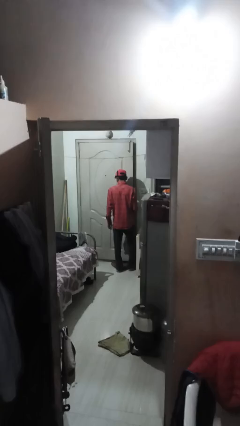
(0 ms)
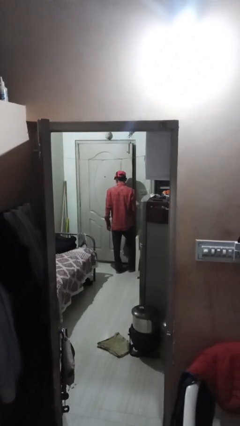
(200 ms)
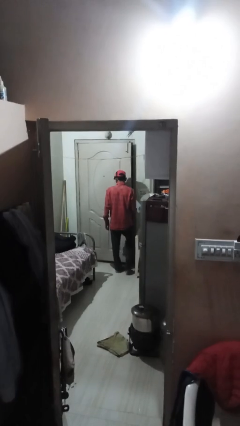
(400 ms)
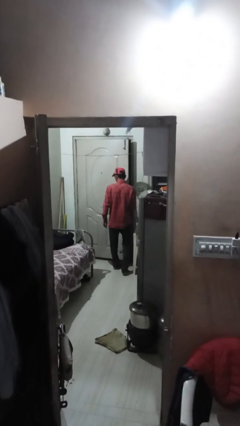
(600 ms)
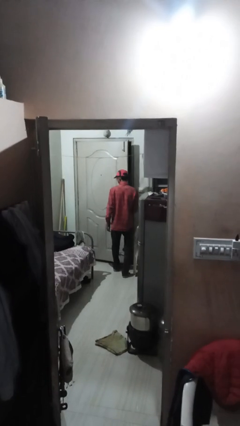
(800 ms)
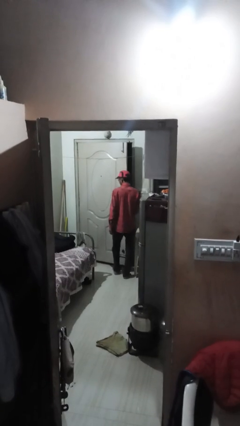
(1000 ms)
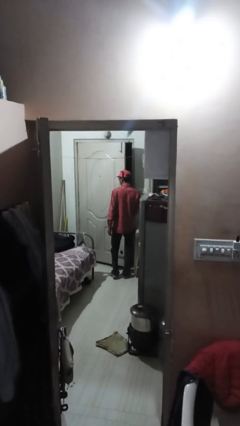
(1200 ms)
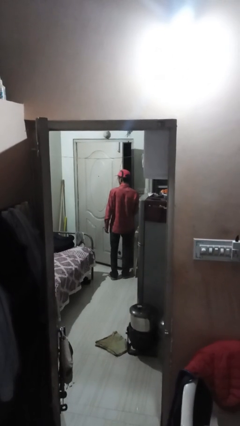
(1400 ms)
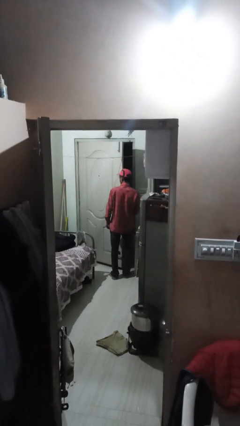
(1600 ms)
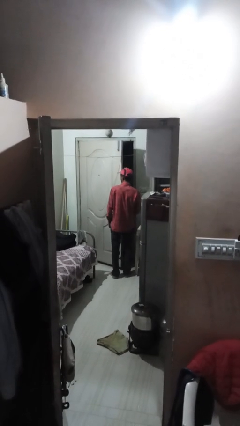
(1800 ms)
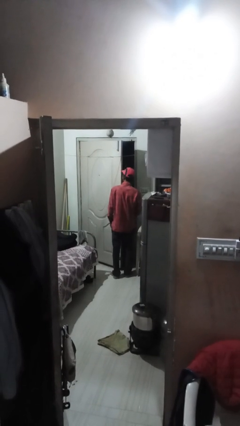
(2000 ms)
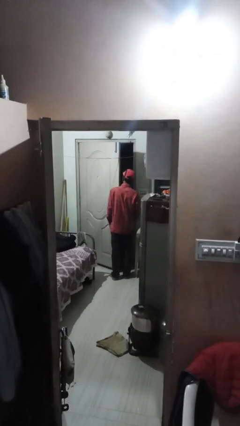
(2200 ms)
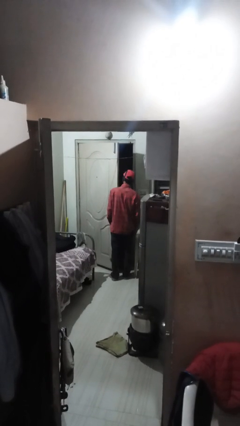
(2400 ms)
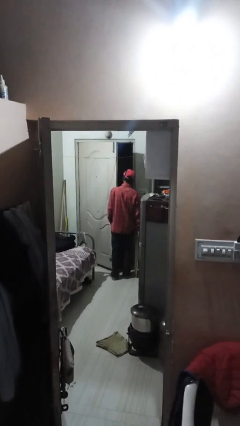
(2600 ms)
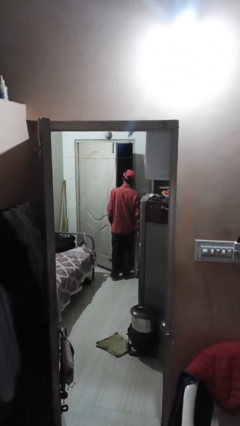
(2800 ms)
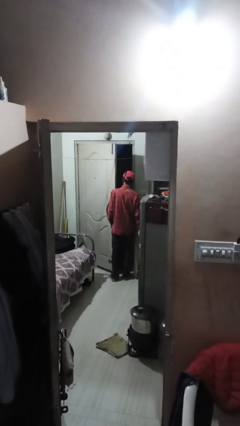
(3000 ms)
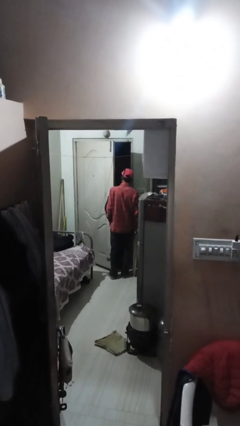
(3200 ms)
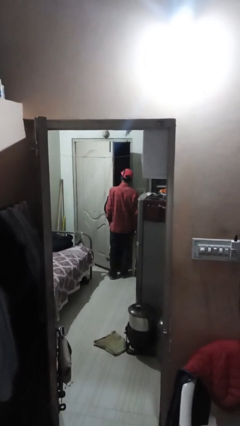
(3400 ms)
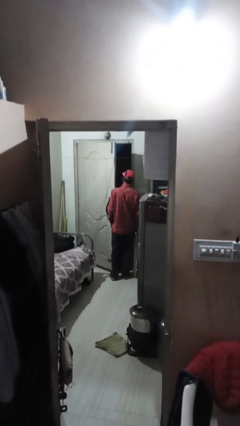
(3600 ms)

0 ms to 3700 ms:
person opens facility door

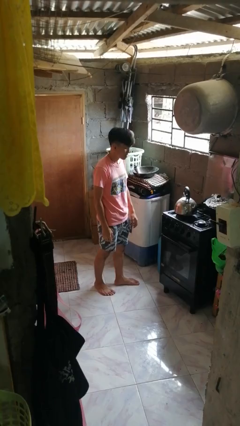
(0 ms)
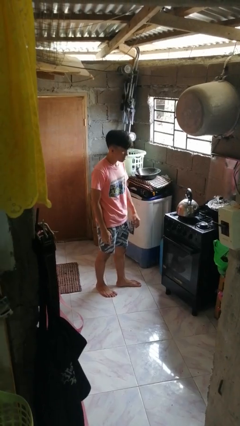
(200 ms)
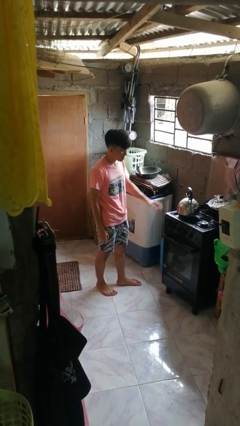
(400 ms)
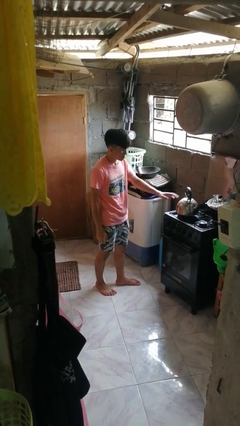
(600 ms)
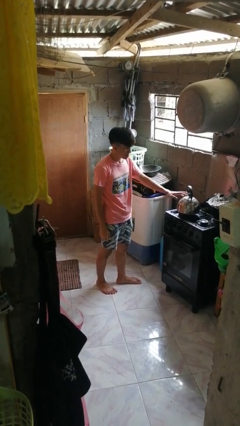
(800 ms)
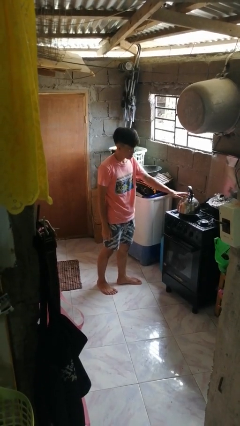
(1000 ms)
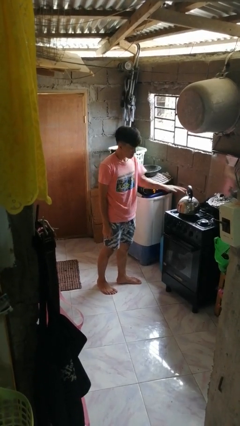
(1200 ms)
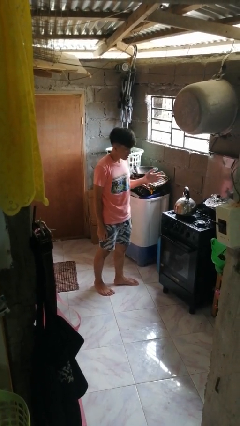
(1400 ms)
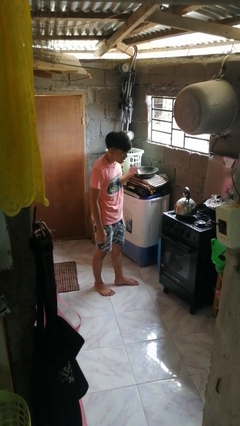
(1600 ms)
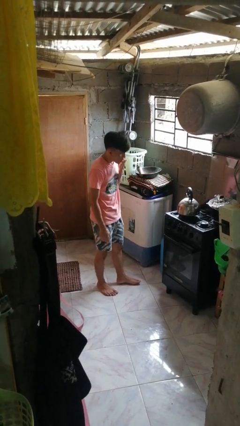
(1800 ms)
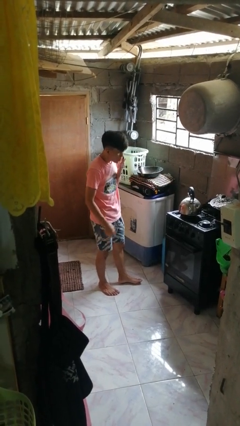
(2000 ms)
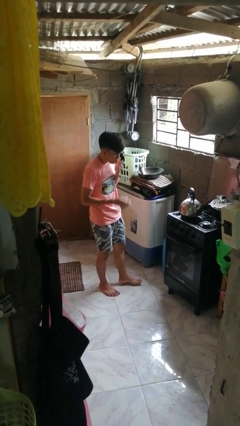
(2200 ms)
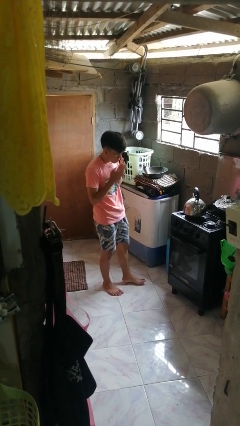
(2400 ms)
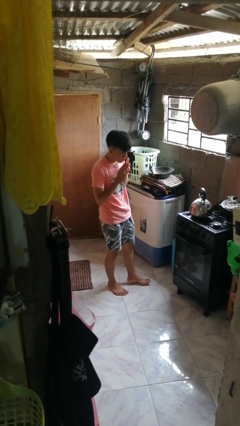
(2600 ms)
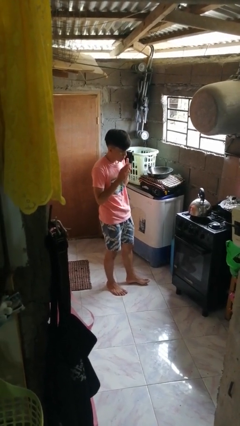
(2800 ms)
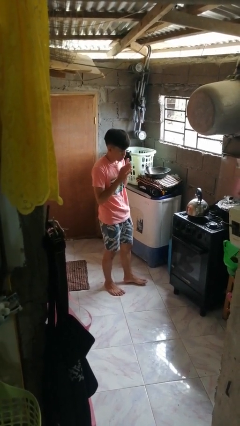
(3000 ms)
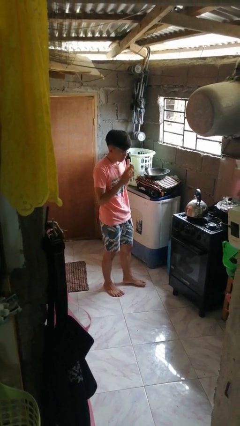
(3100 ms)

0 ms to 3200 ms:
person burns hand

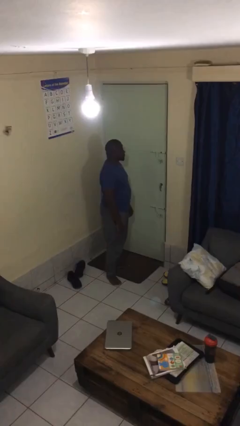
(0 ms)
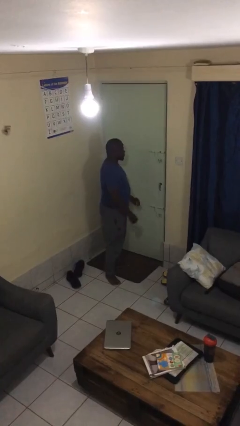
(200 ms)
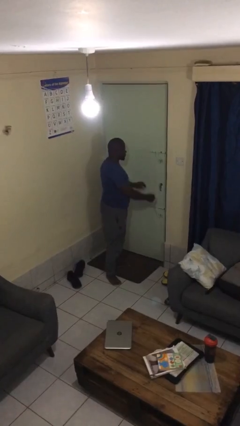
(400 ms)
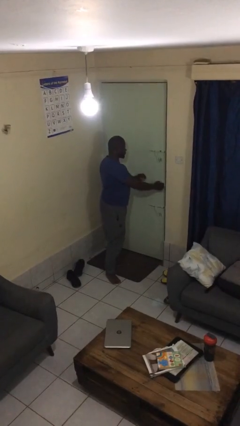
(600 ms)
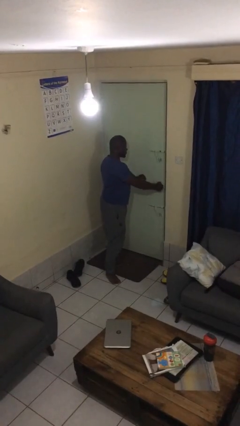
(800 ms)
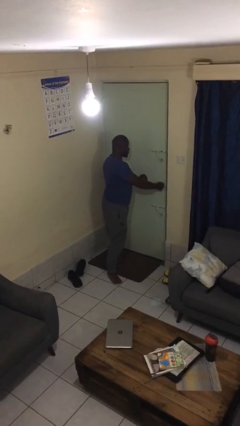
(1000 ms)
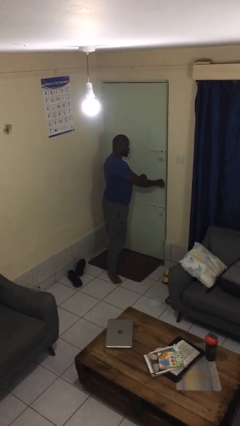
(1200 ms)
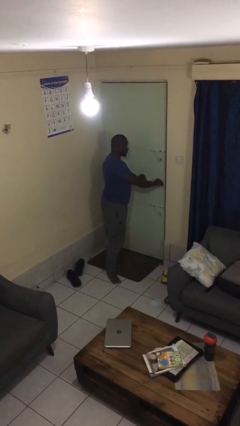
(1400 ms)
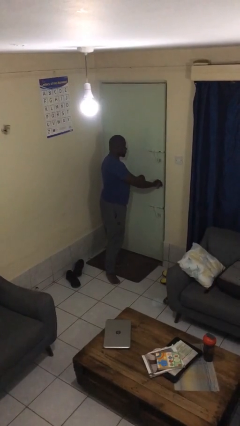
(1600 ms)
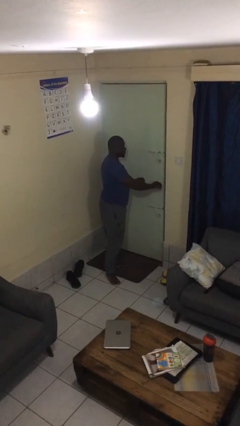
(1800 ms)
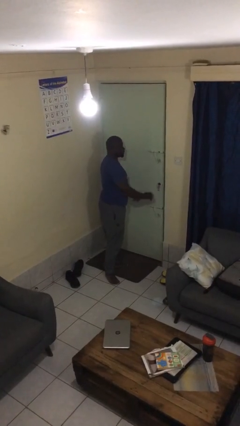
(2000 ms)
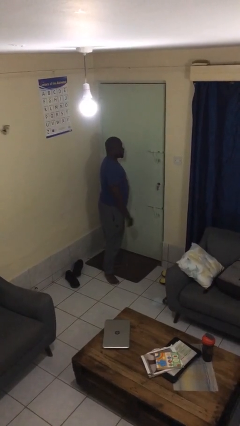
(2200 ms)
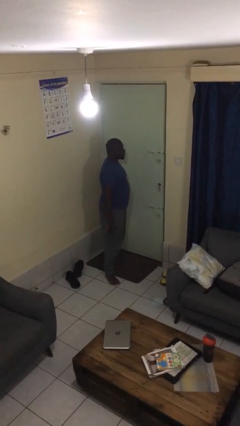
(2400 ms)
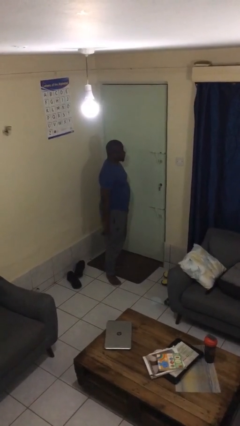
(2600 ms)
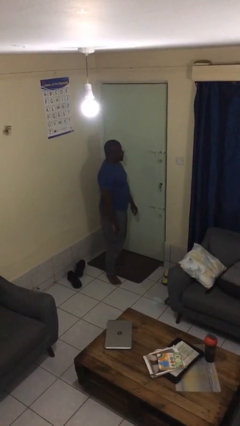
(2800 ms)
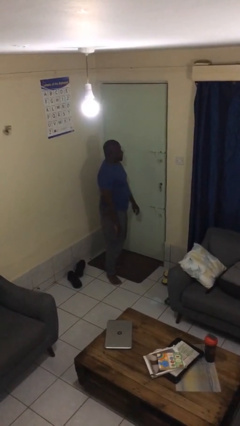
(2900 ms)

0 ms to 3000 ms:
person unlocks door with keys

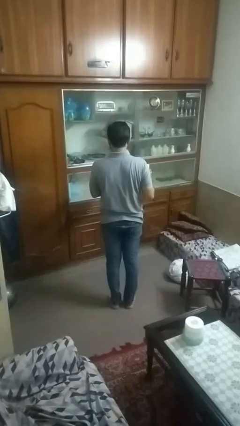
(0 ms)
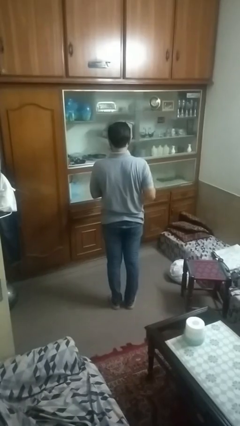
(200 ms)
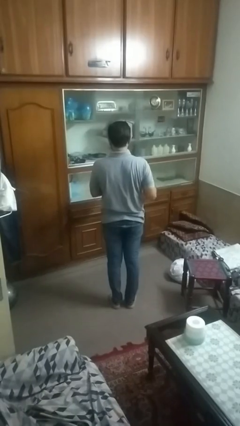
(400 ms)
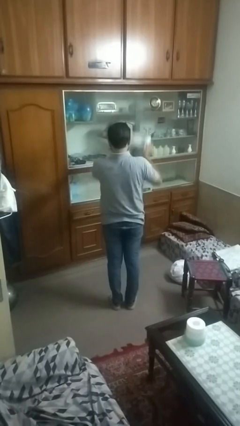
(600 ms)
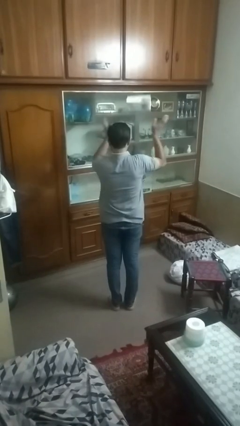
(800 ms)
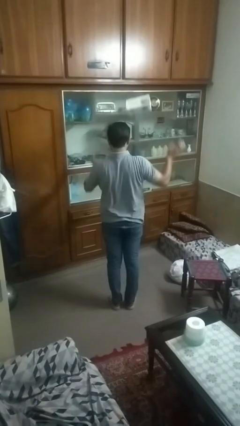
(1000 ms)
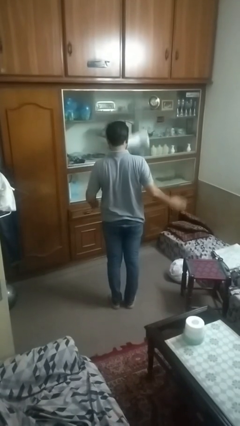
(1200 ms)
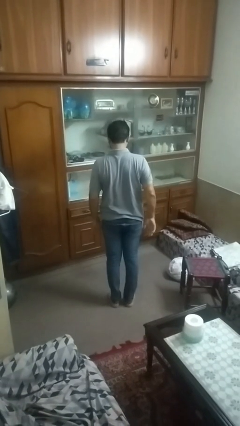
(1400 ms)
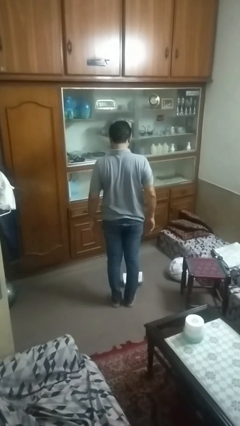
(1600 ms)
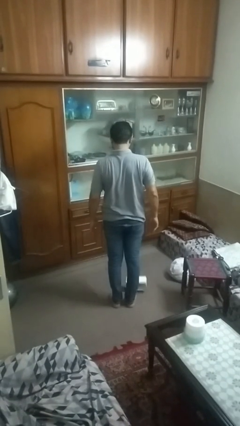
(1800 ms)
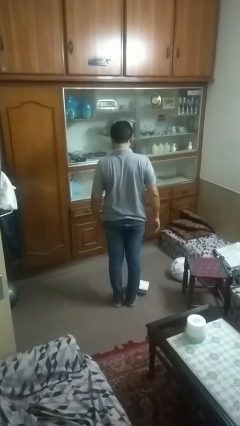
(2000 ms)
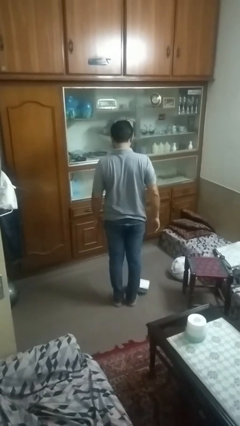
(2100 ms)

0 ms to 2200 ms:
person throws object into air

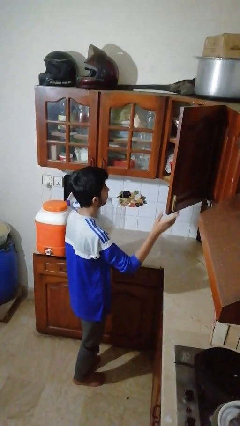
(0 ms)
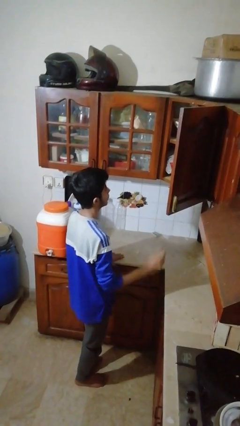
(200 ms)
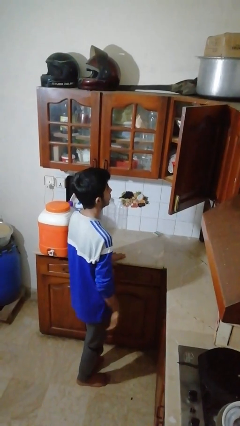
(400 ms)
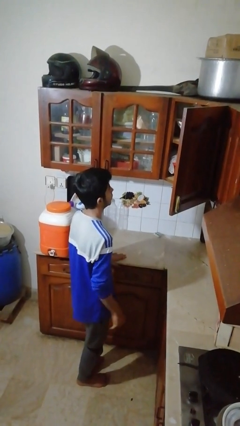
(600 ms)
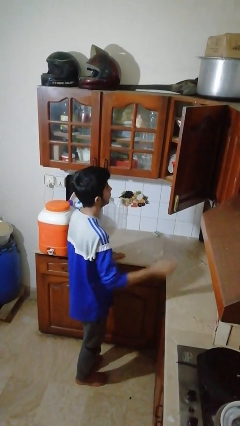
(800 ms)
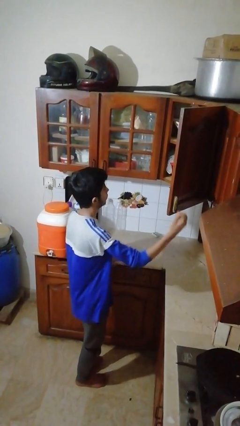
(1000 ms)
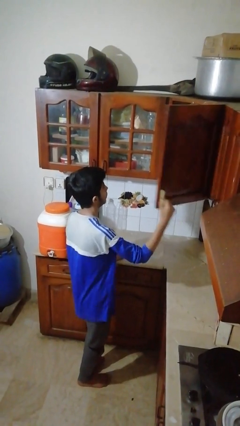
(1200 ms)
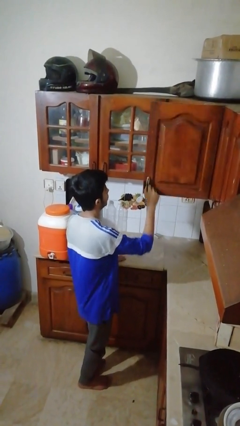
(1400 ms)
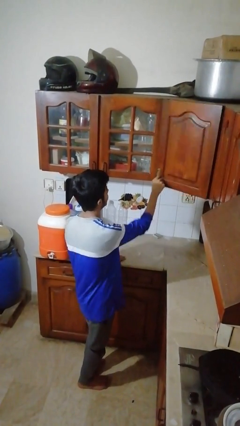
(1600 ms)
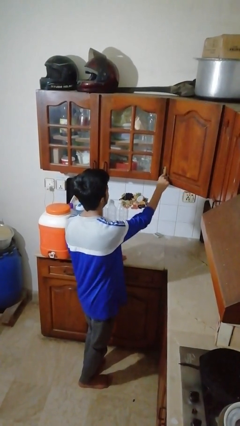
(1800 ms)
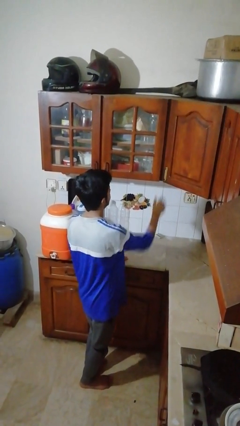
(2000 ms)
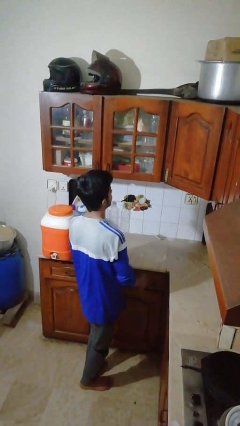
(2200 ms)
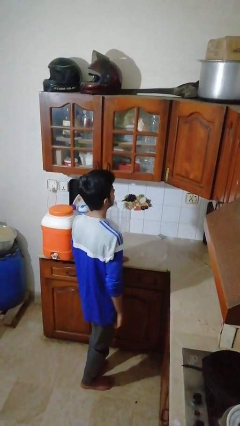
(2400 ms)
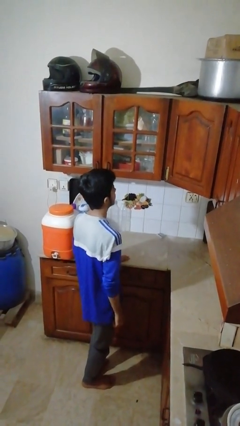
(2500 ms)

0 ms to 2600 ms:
person closes cabinet

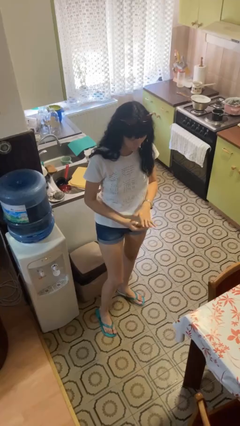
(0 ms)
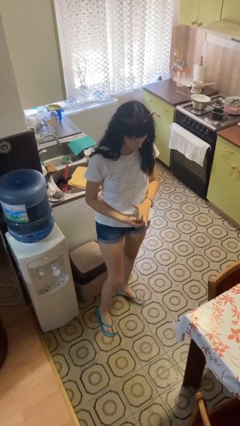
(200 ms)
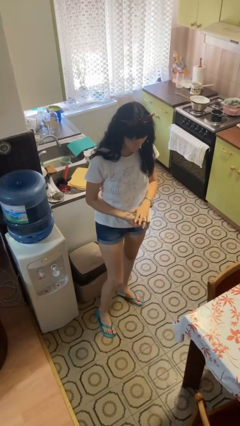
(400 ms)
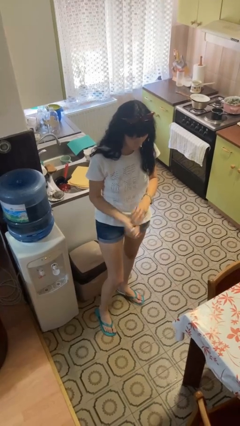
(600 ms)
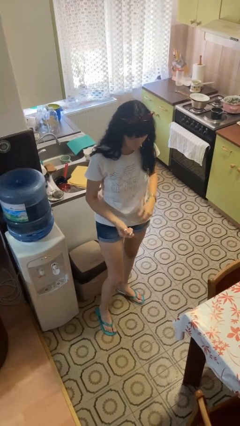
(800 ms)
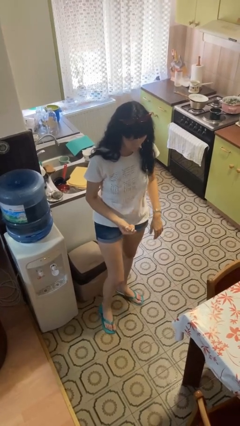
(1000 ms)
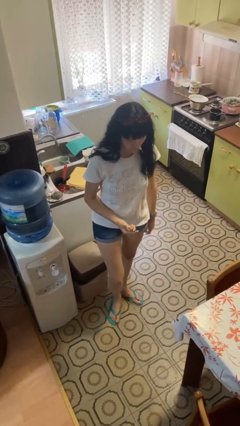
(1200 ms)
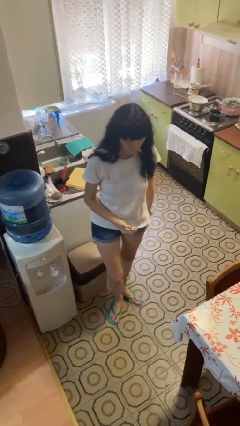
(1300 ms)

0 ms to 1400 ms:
person takes off ring

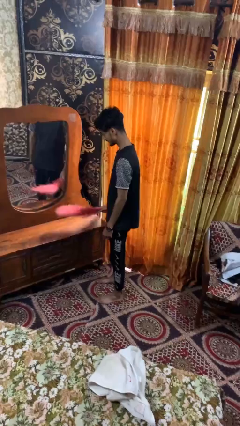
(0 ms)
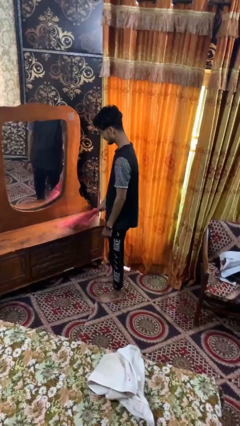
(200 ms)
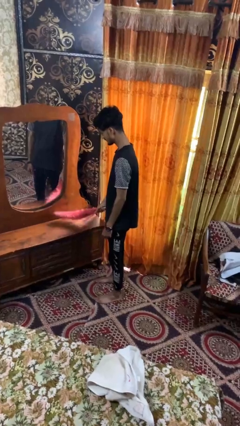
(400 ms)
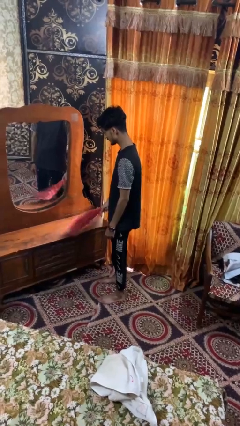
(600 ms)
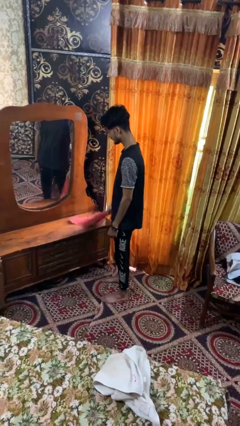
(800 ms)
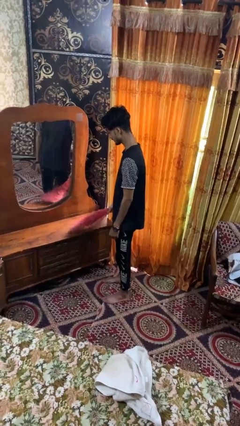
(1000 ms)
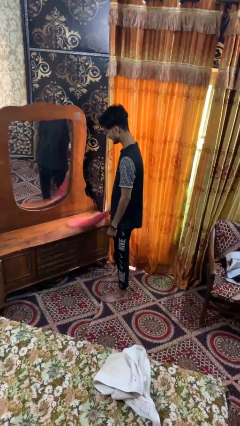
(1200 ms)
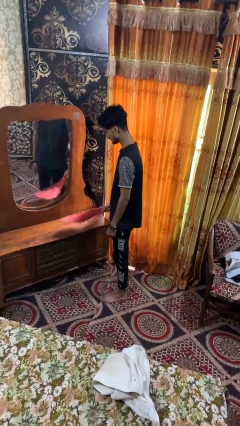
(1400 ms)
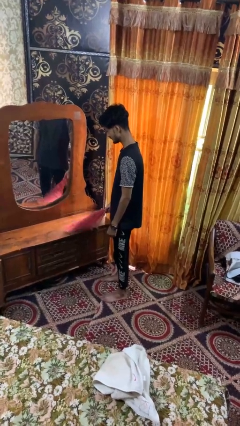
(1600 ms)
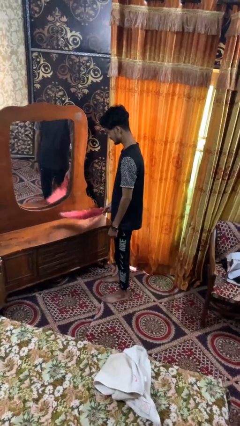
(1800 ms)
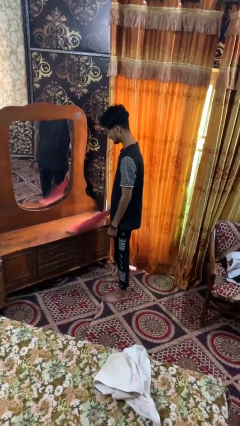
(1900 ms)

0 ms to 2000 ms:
person dusts furniture
